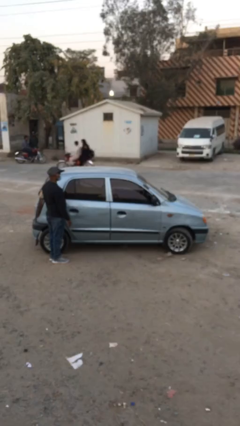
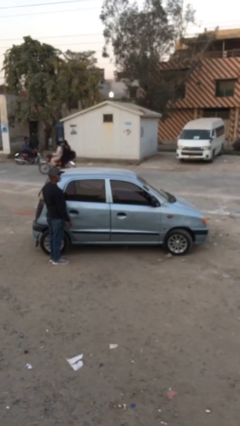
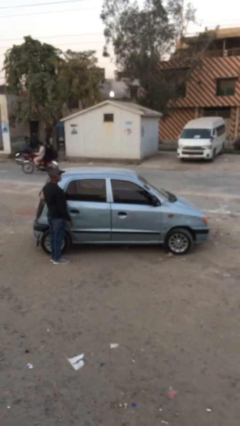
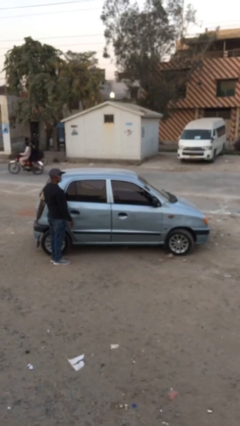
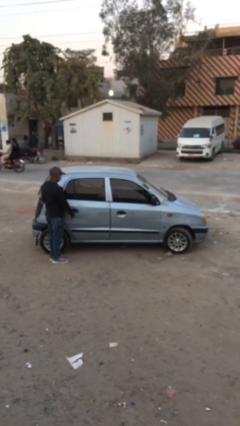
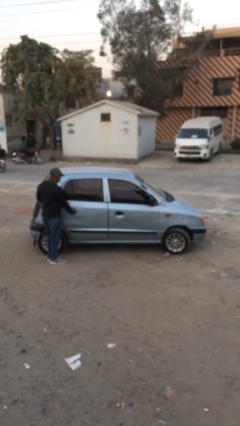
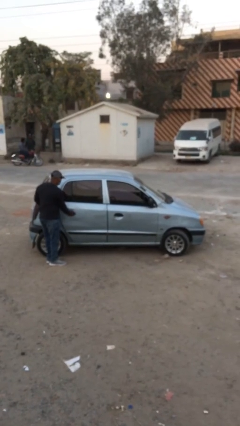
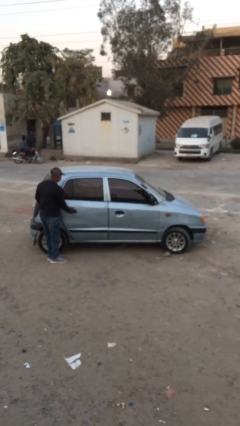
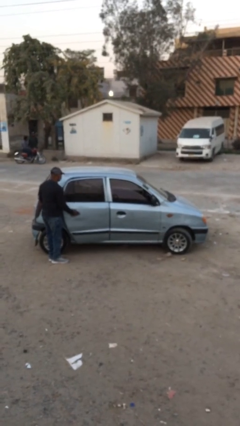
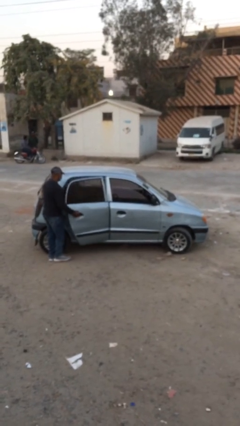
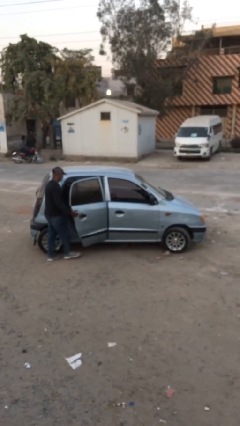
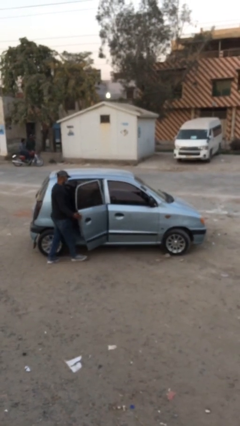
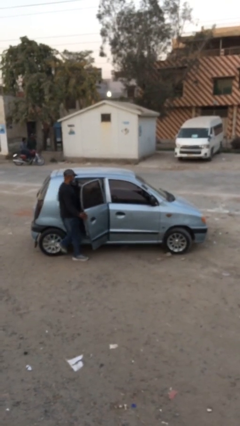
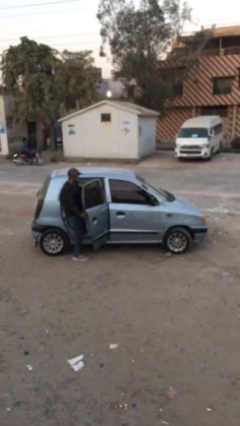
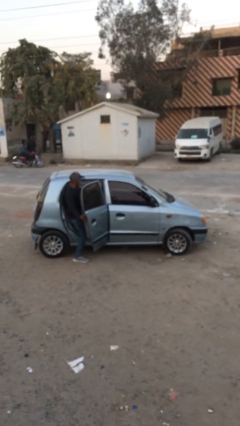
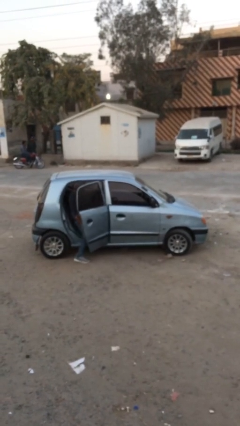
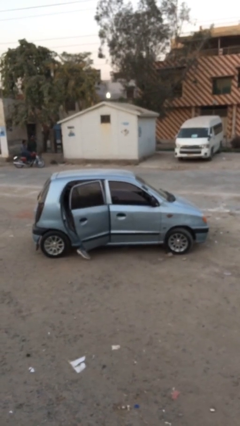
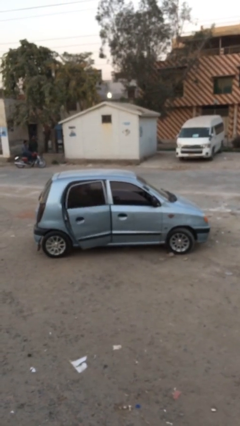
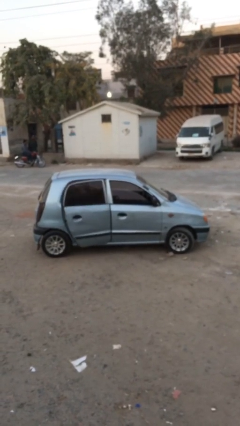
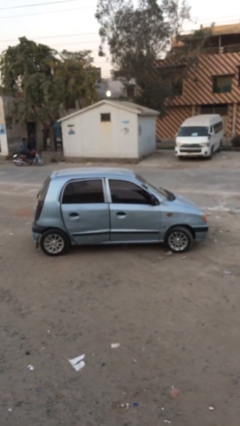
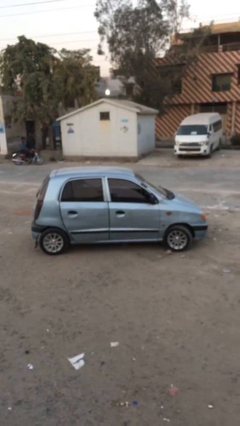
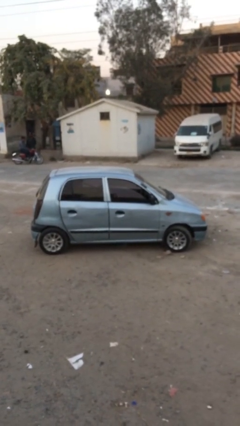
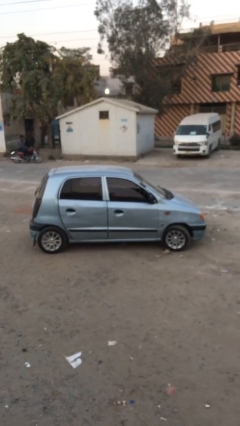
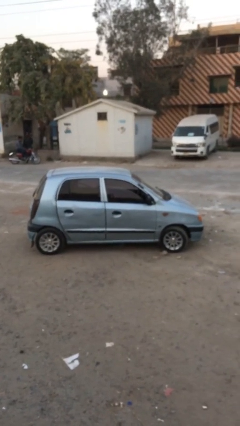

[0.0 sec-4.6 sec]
car picks up person

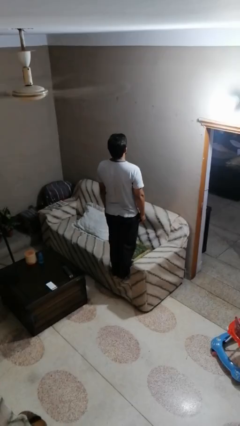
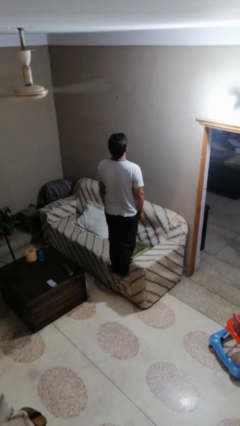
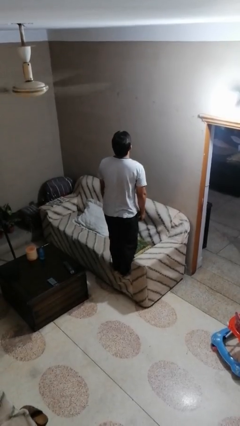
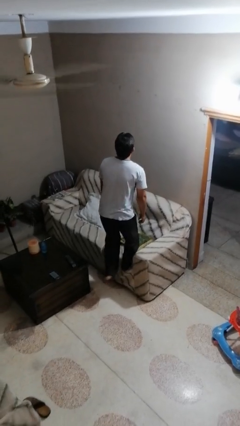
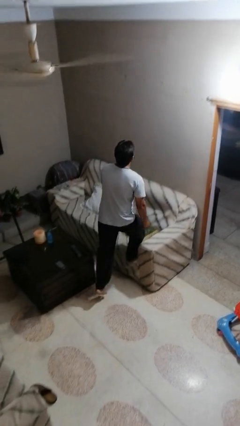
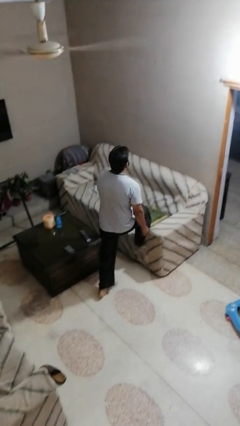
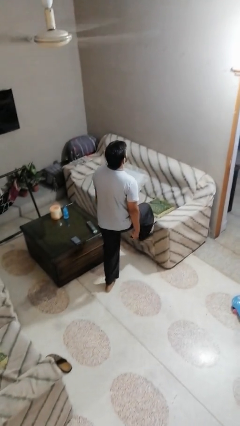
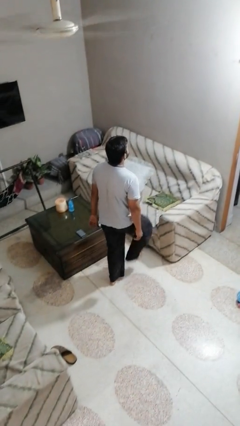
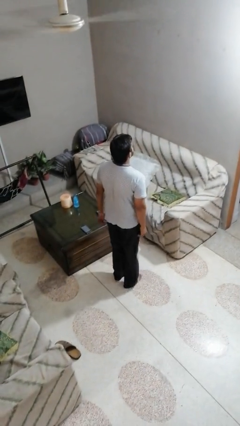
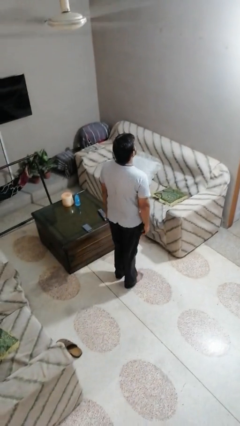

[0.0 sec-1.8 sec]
person climbs off couch

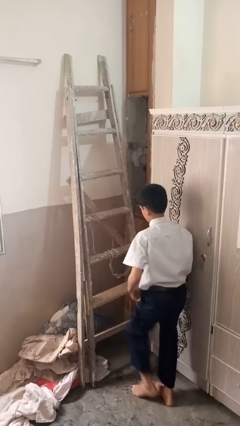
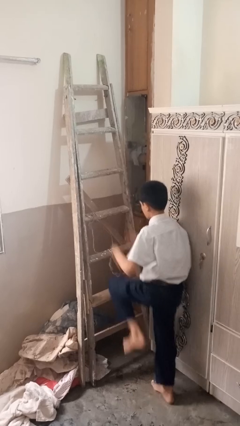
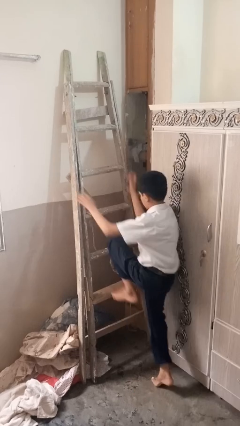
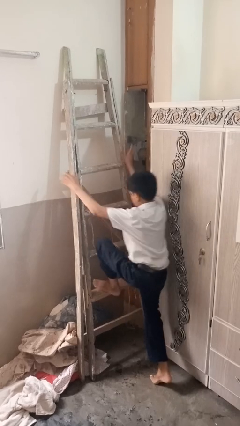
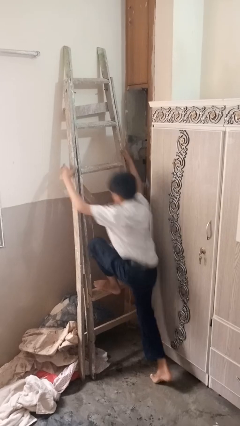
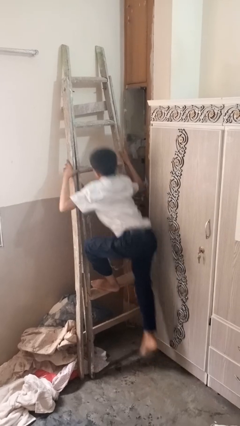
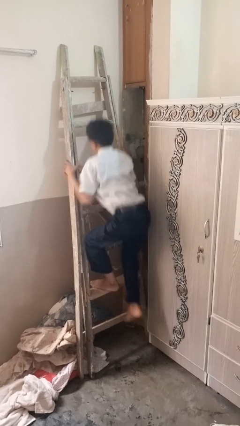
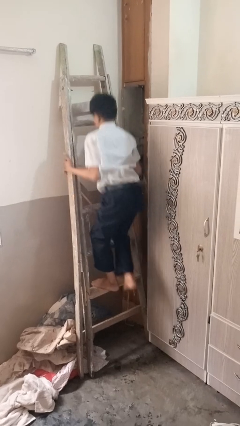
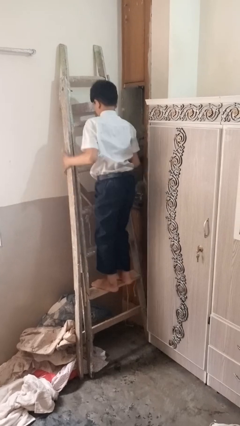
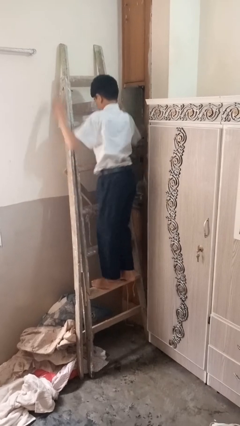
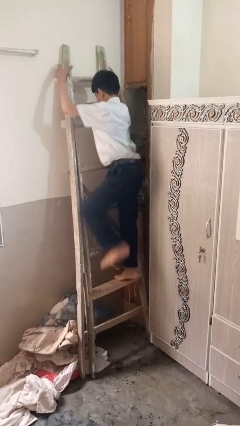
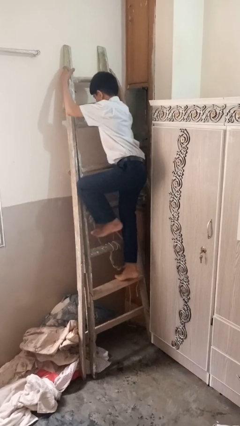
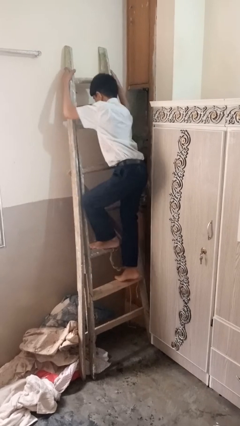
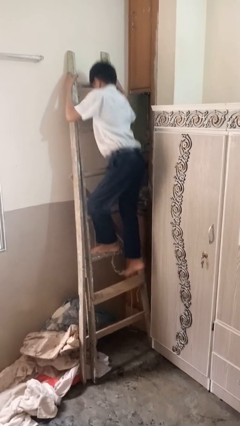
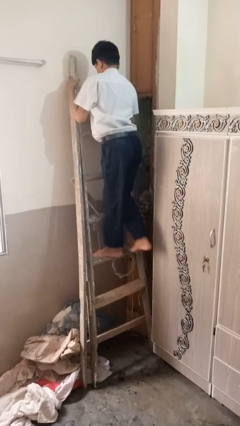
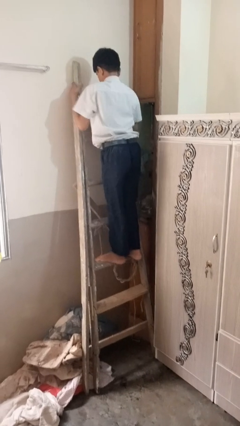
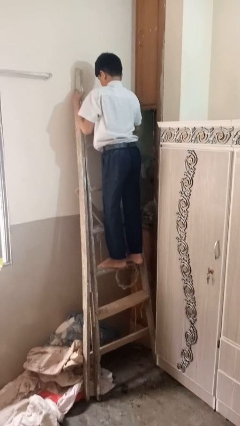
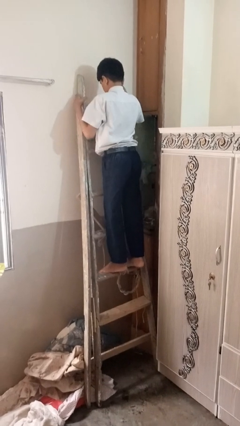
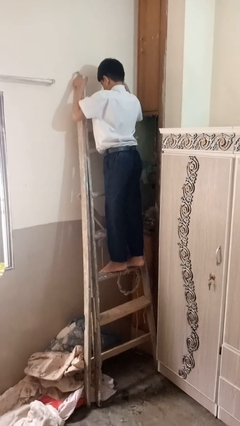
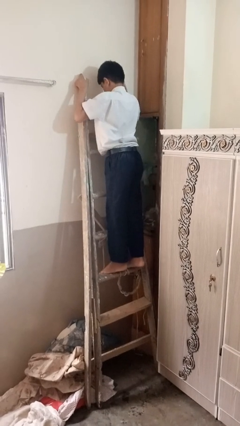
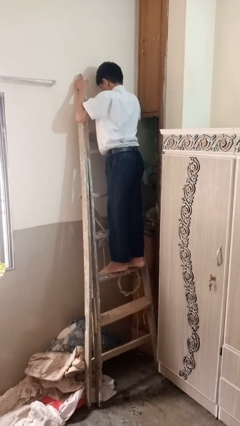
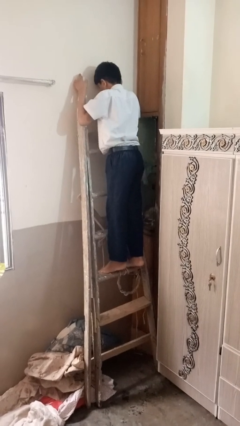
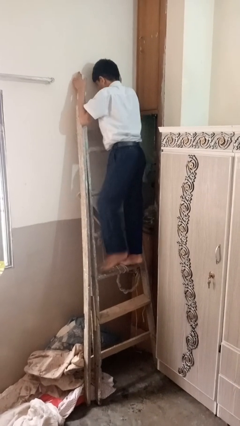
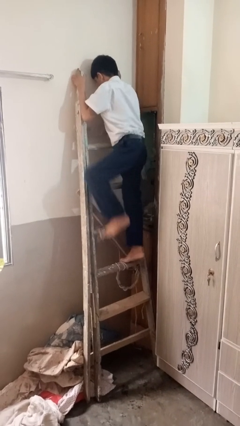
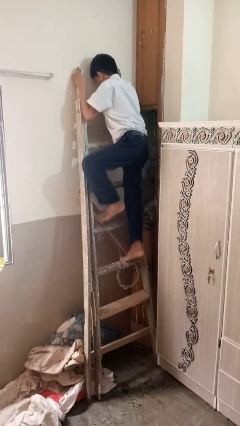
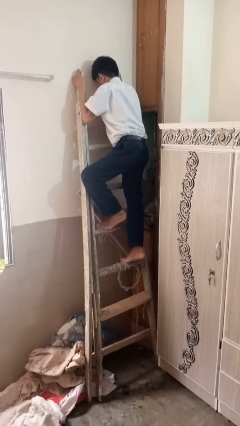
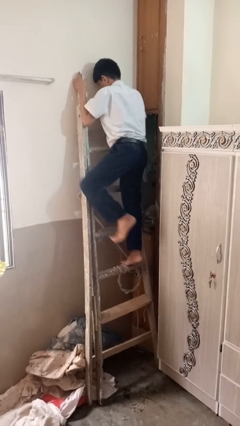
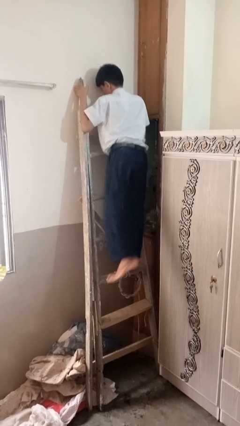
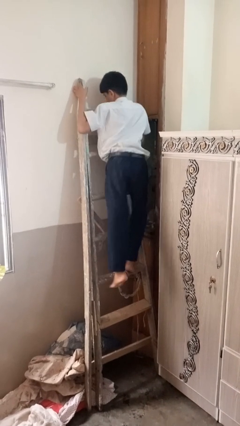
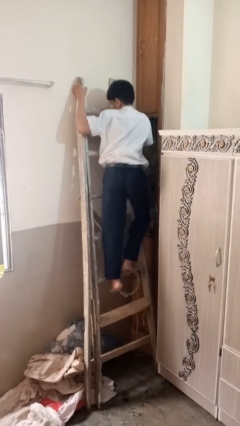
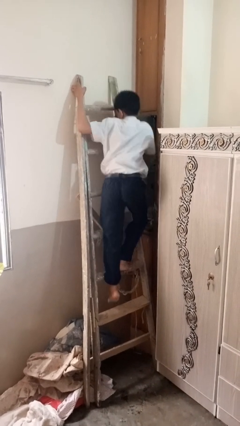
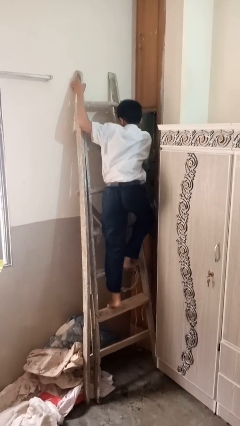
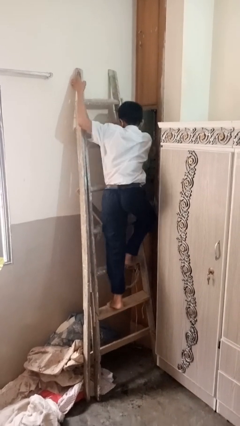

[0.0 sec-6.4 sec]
person climbs up ladder

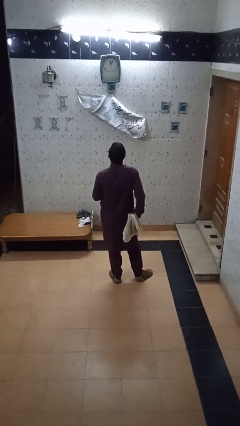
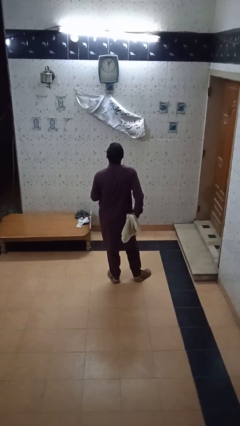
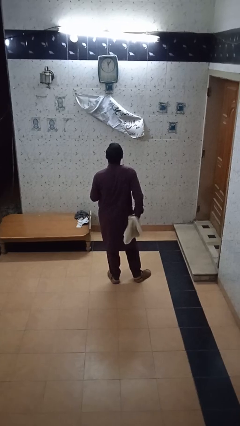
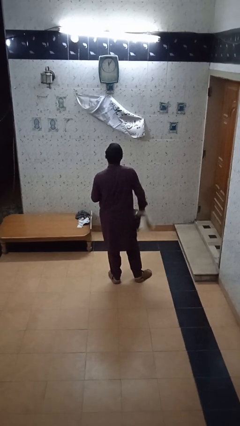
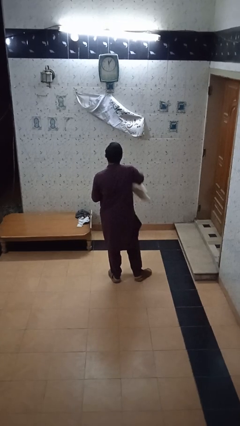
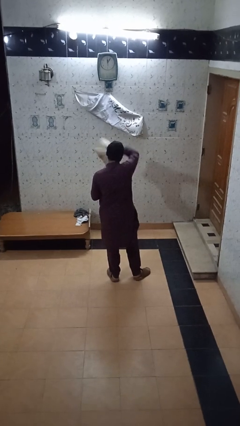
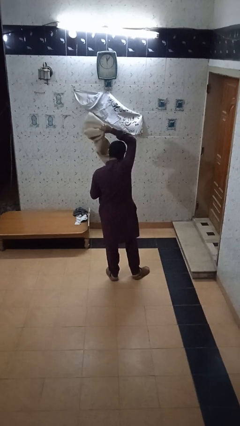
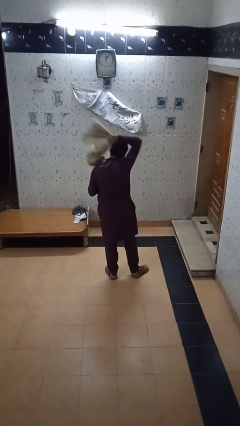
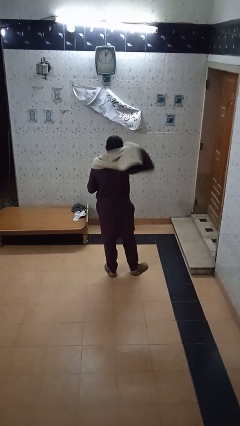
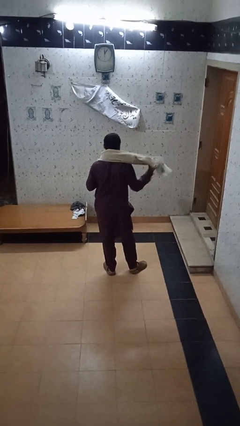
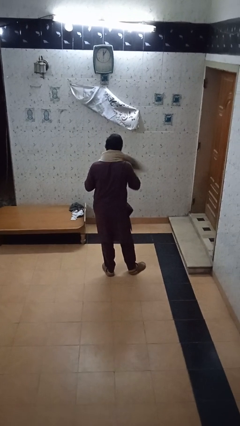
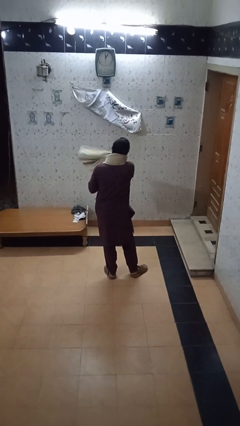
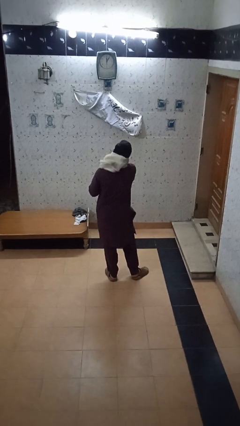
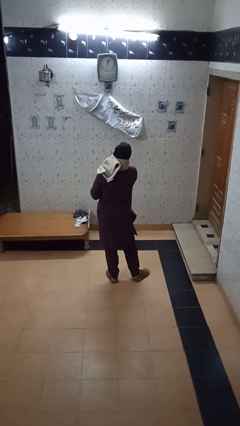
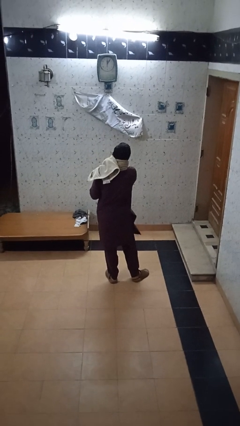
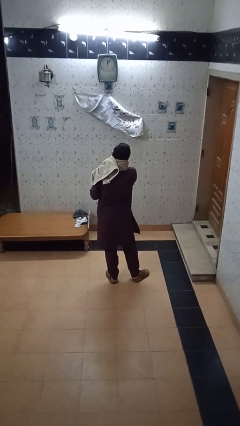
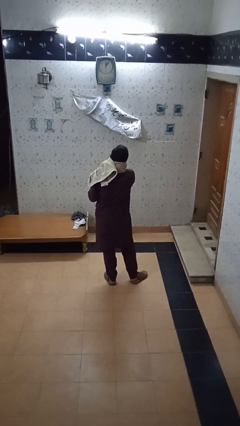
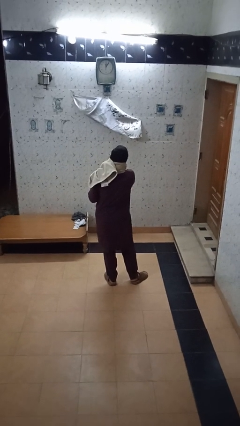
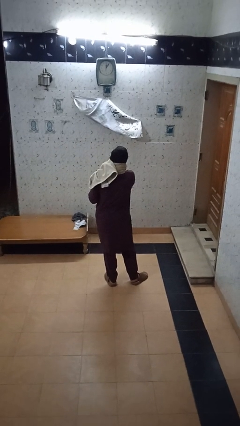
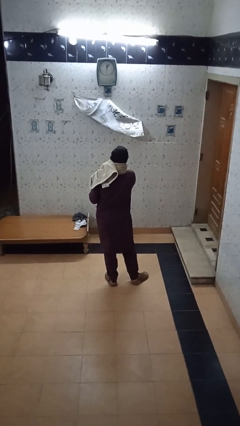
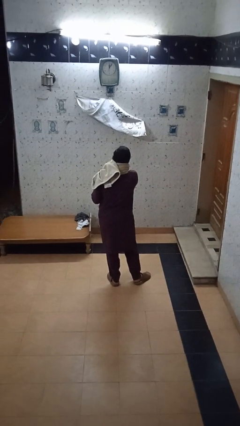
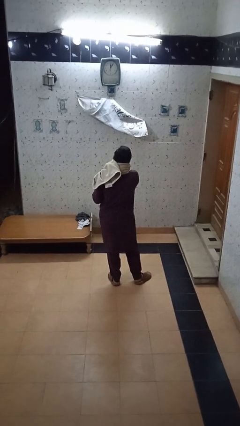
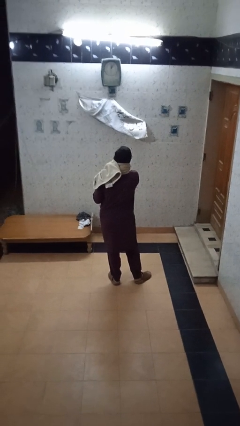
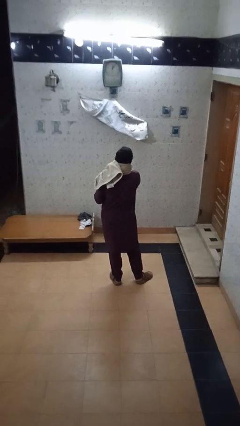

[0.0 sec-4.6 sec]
person puts on scarf

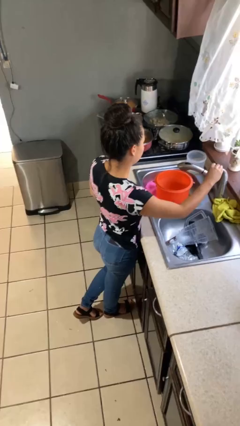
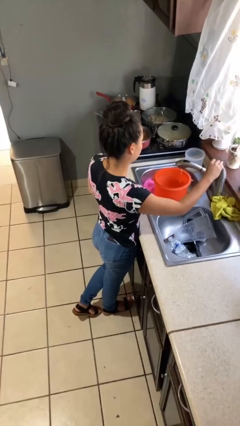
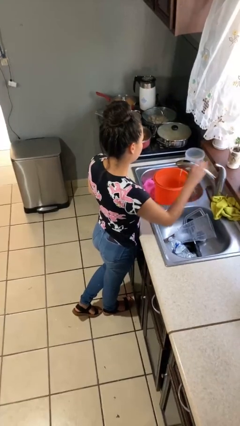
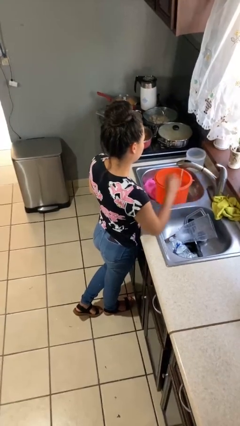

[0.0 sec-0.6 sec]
person turns on faucet
